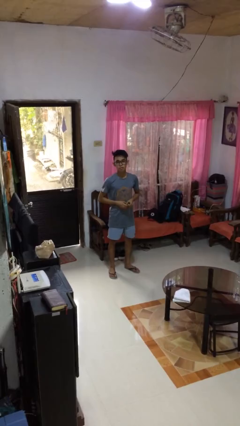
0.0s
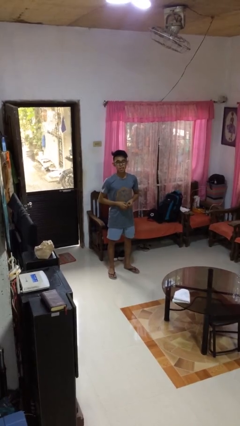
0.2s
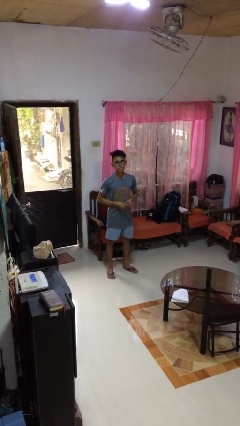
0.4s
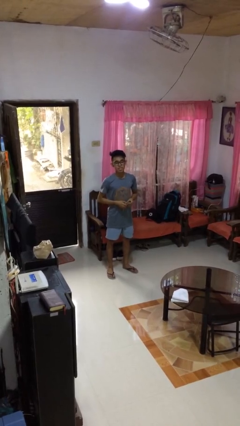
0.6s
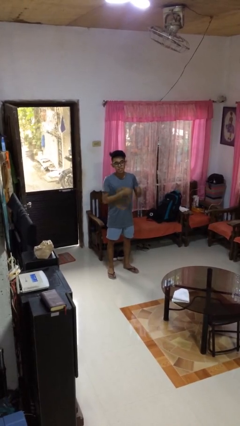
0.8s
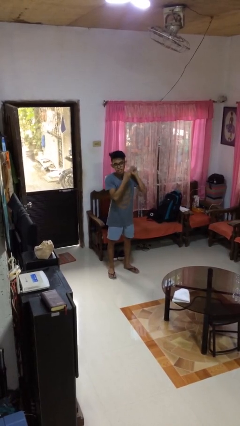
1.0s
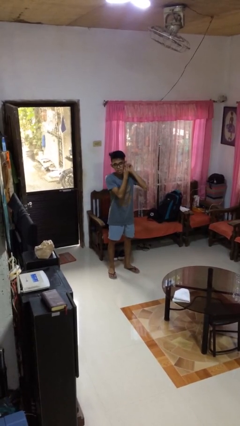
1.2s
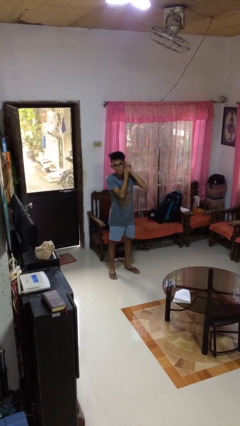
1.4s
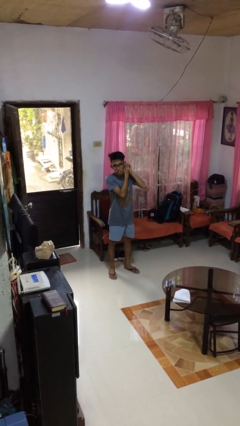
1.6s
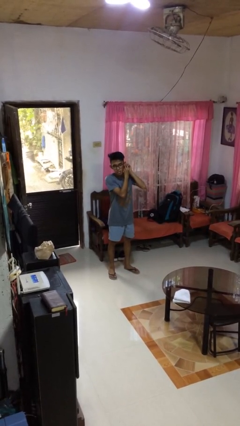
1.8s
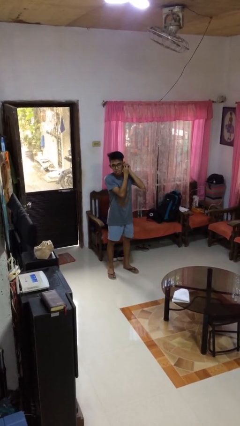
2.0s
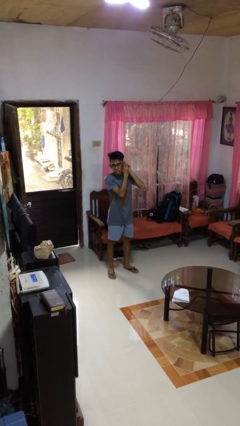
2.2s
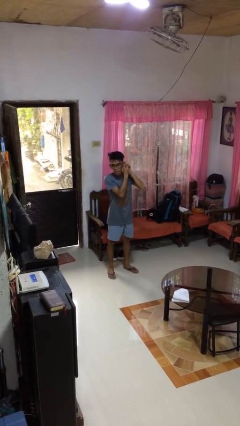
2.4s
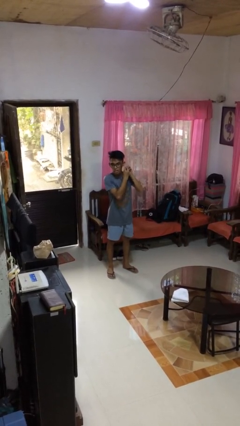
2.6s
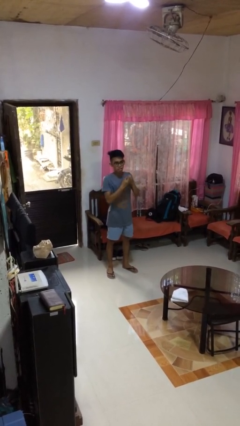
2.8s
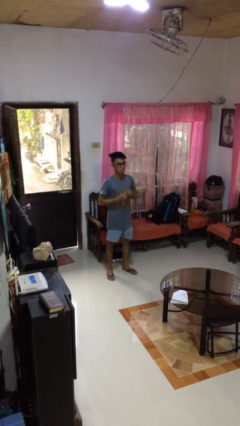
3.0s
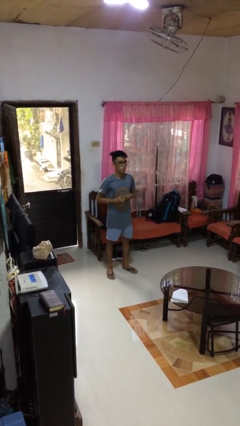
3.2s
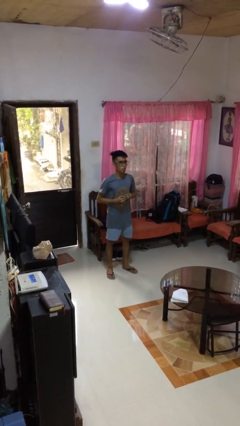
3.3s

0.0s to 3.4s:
person takes off earrings

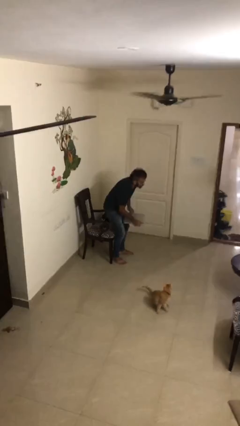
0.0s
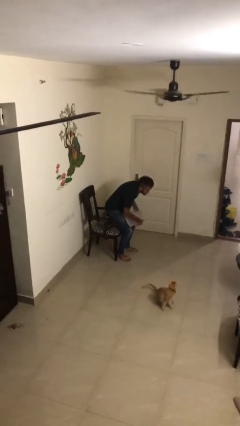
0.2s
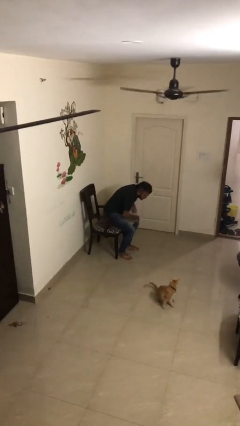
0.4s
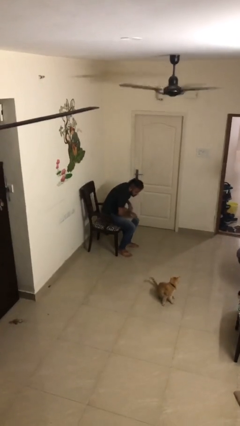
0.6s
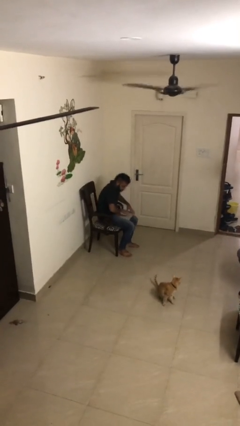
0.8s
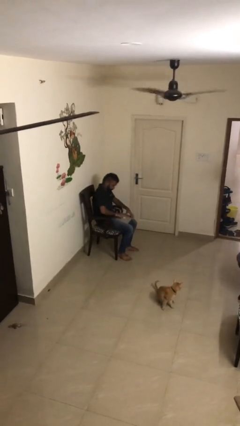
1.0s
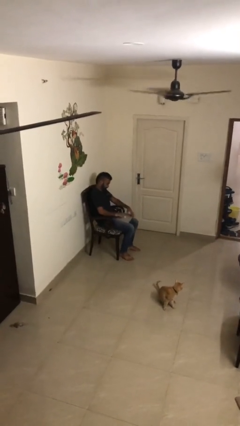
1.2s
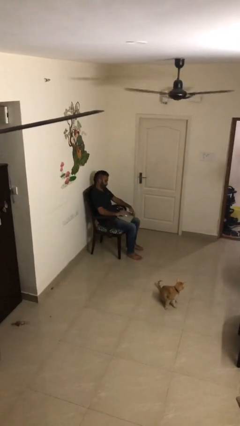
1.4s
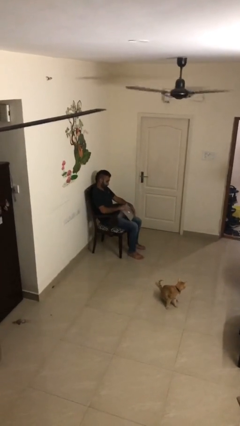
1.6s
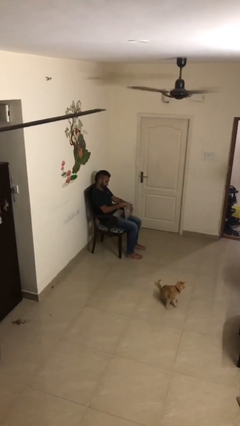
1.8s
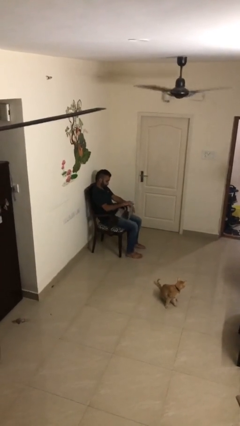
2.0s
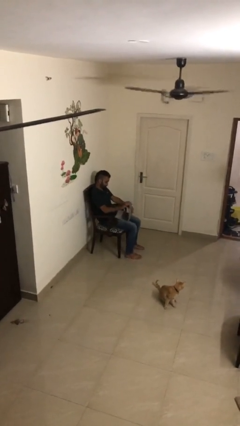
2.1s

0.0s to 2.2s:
person sits down

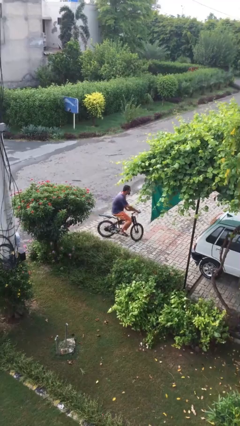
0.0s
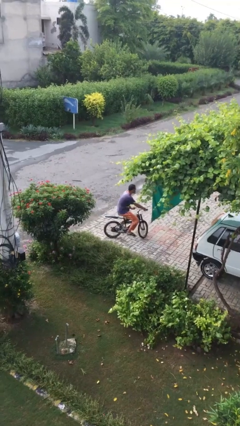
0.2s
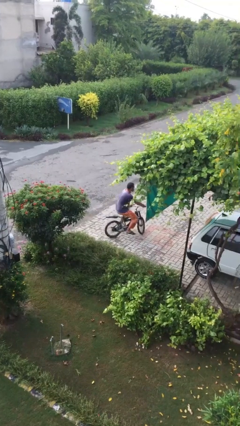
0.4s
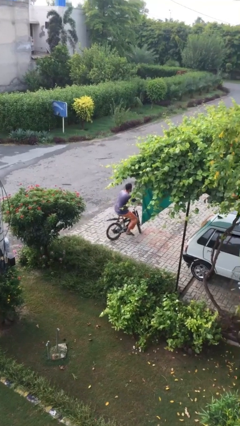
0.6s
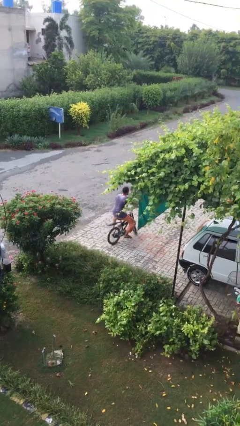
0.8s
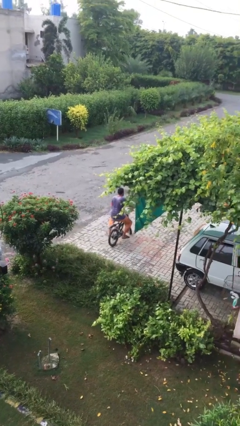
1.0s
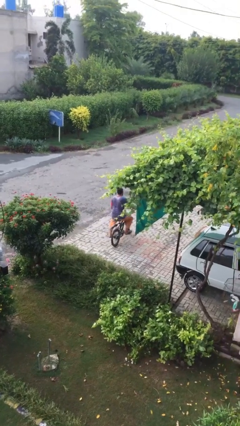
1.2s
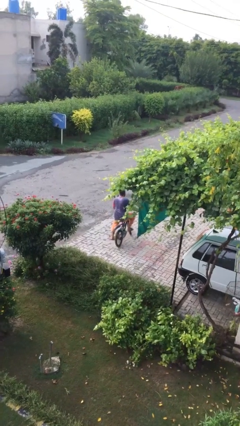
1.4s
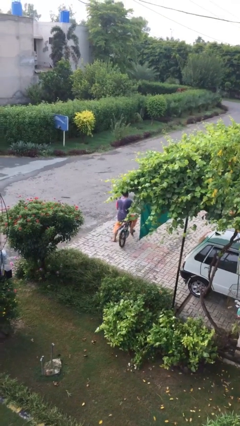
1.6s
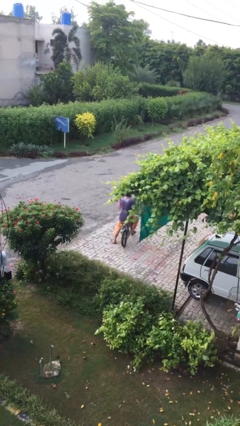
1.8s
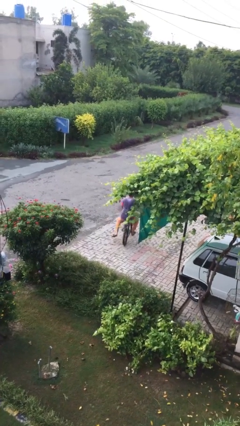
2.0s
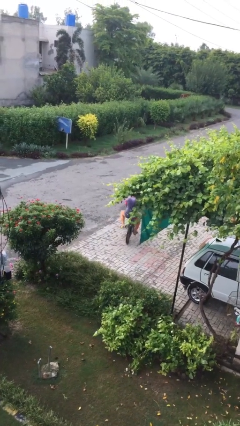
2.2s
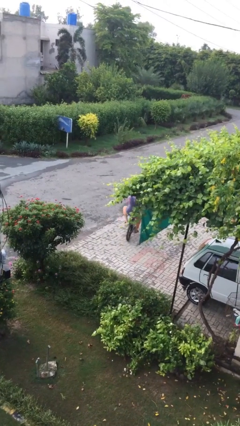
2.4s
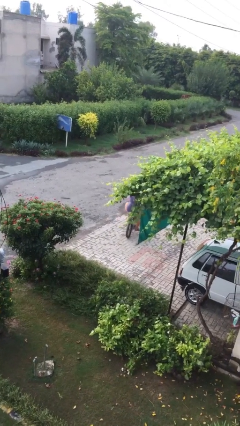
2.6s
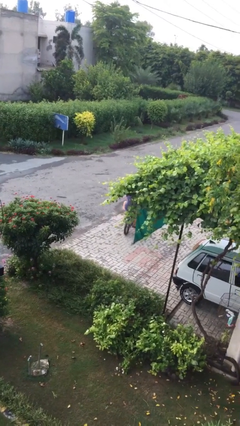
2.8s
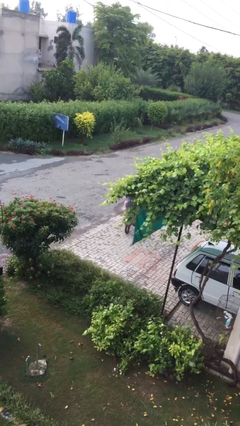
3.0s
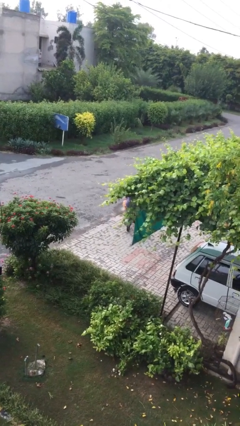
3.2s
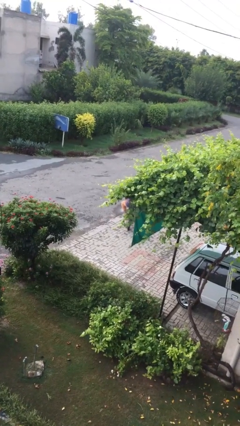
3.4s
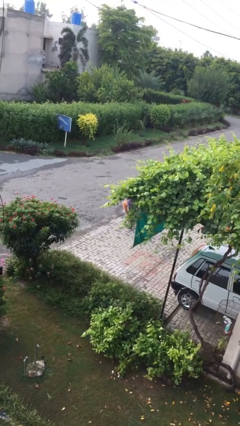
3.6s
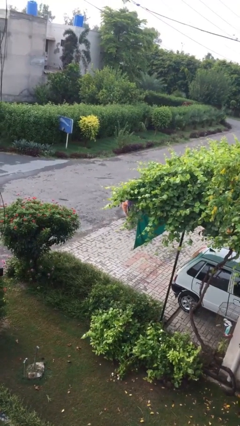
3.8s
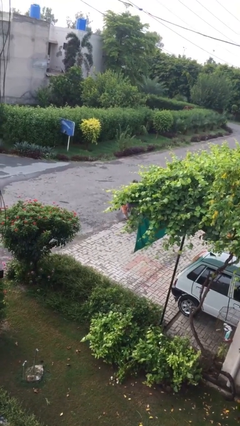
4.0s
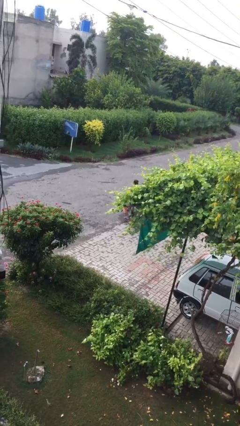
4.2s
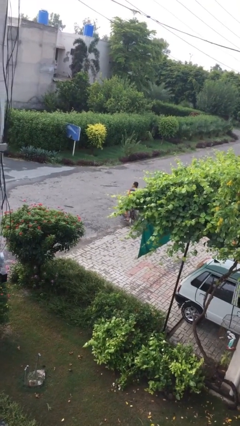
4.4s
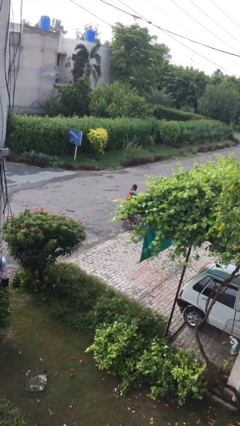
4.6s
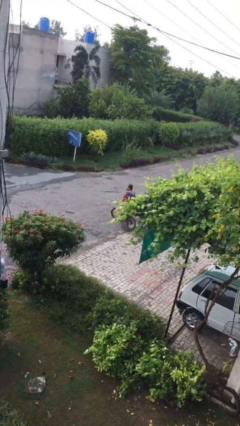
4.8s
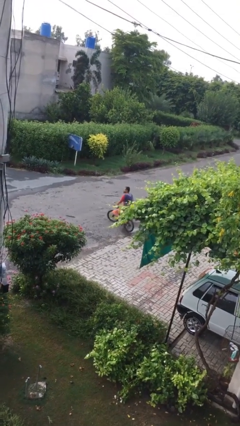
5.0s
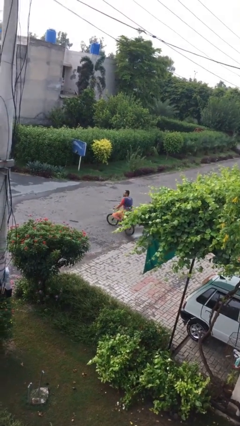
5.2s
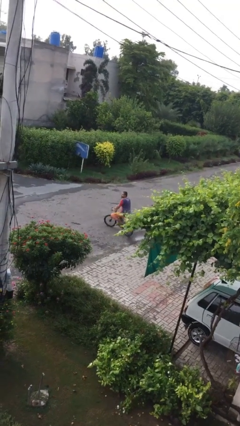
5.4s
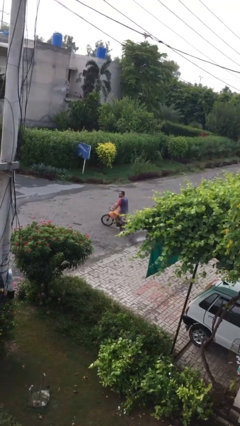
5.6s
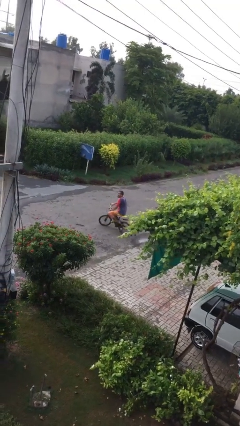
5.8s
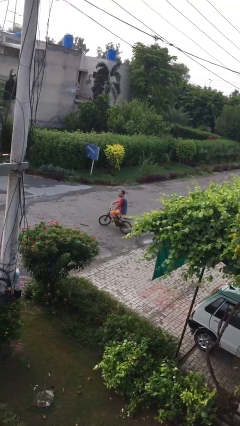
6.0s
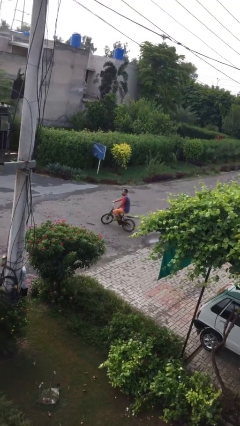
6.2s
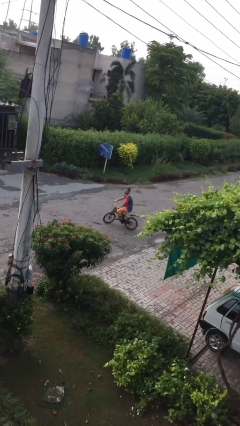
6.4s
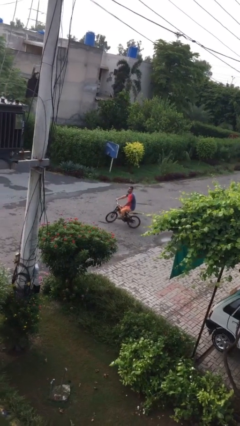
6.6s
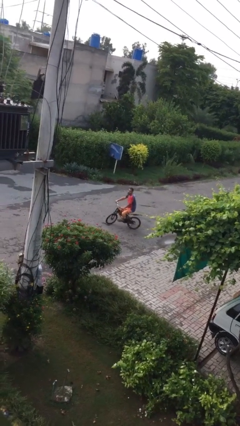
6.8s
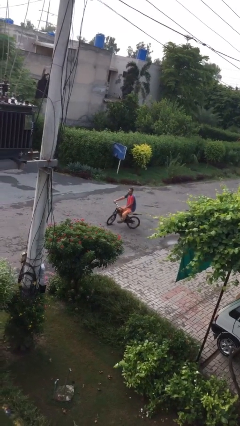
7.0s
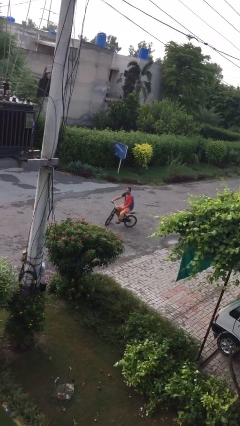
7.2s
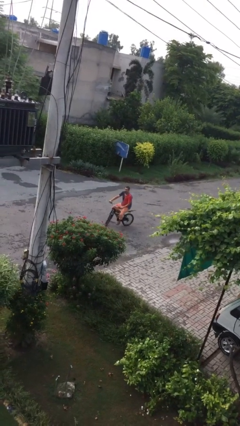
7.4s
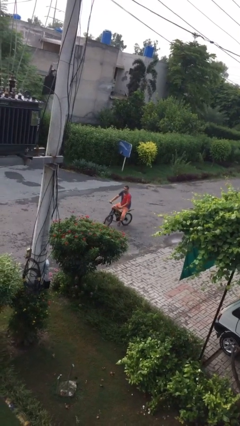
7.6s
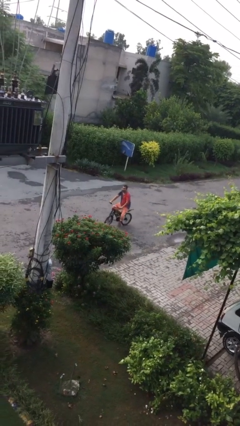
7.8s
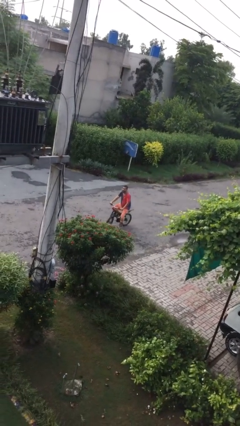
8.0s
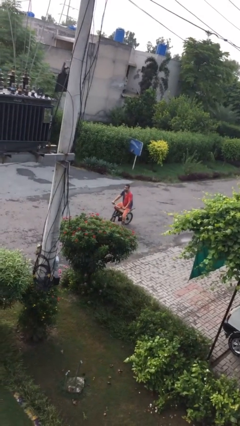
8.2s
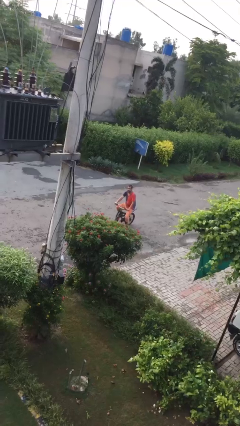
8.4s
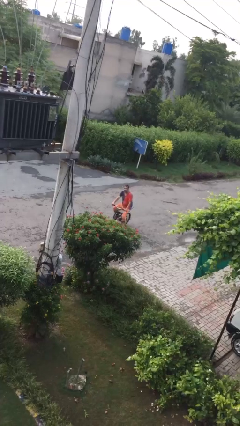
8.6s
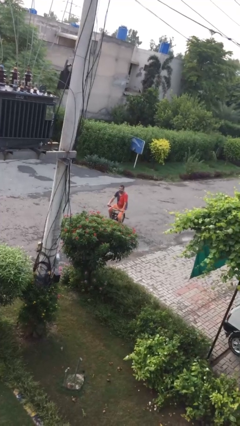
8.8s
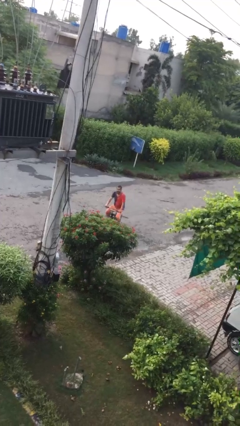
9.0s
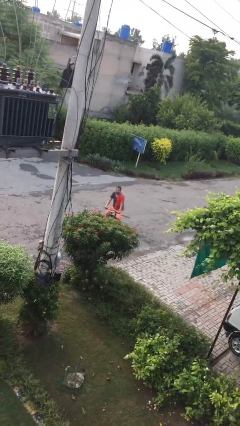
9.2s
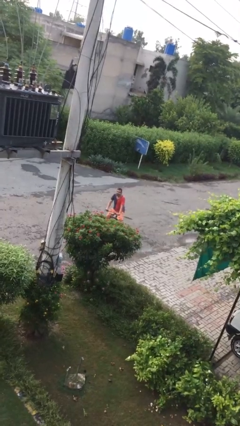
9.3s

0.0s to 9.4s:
person rides bicycle

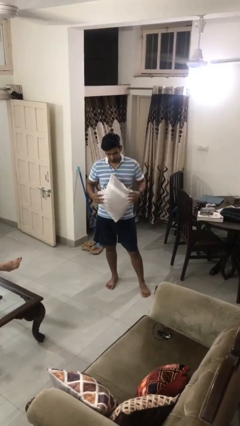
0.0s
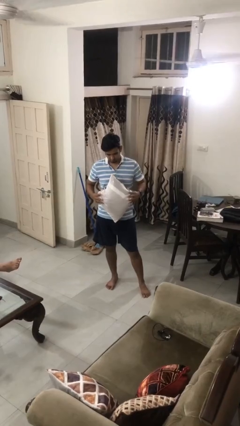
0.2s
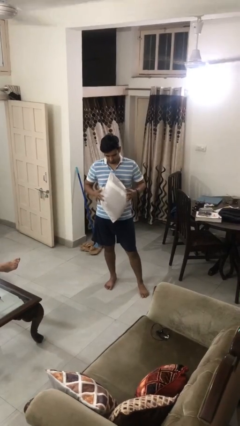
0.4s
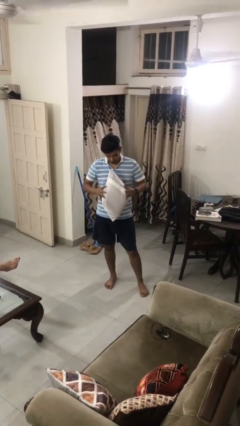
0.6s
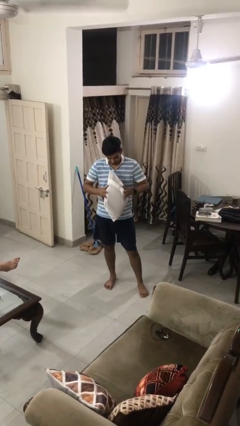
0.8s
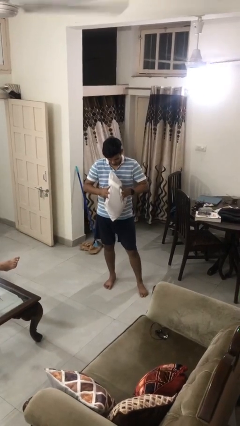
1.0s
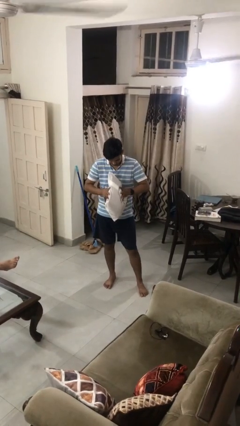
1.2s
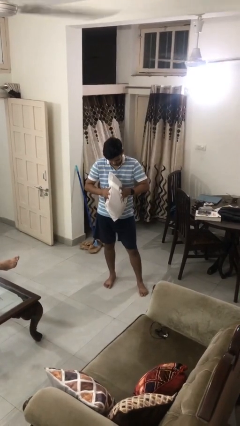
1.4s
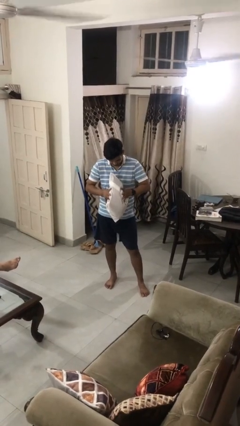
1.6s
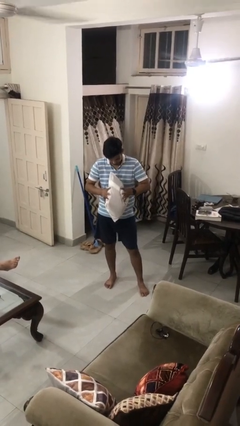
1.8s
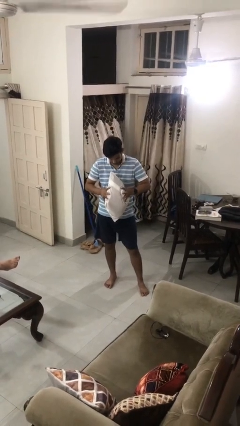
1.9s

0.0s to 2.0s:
person squeezes object

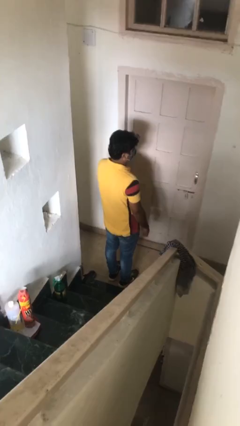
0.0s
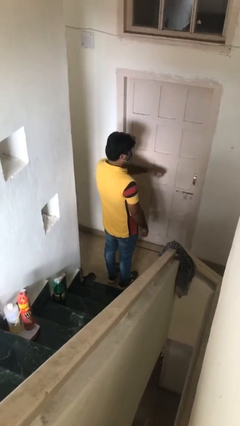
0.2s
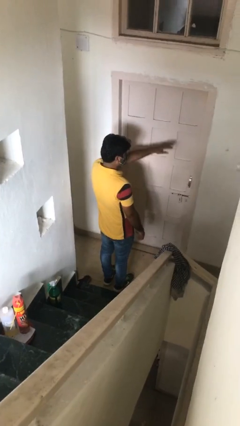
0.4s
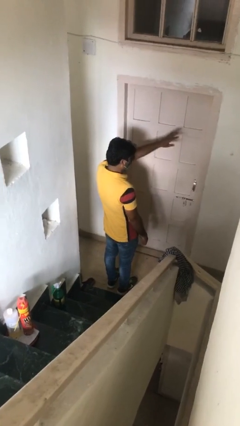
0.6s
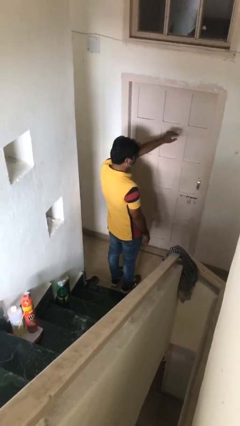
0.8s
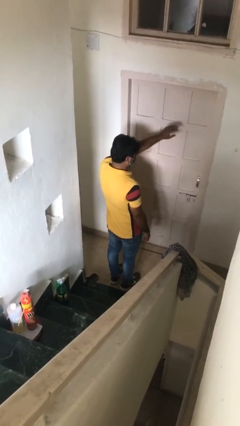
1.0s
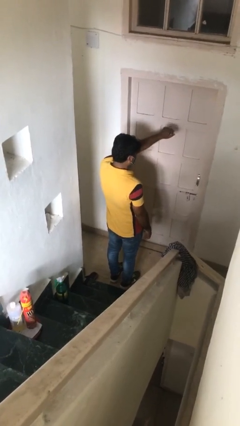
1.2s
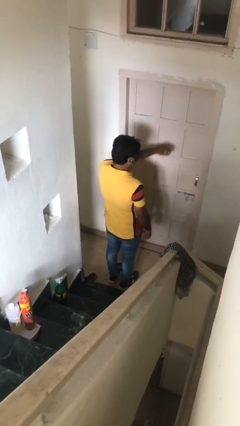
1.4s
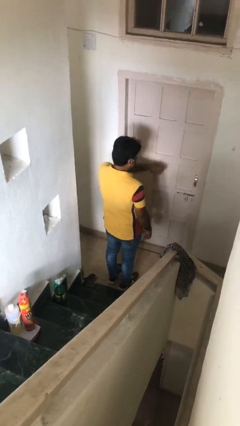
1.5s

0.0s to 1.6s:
person gestures come here
